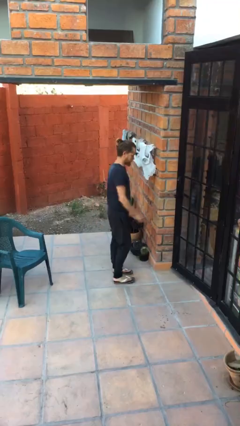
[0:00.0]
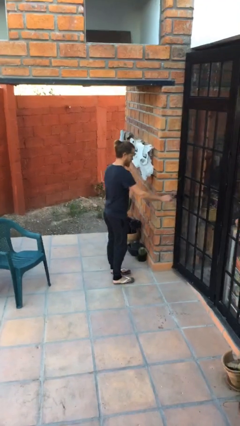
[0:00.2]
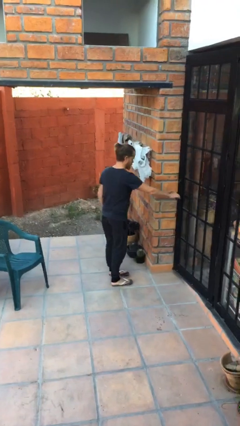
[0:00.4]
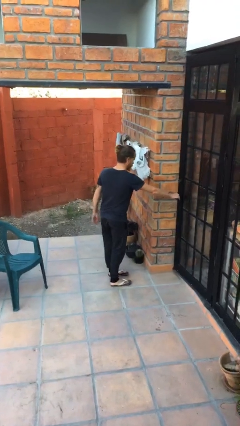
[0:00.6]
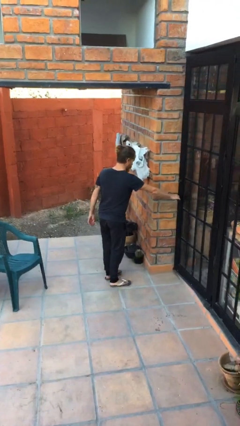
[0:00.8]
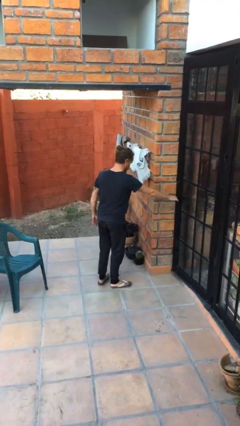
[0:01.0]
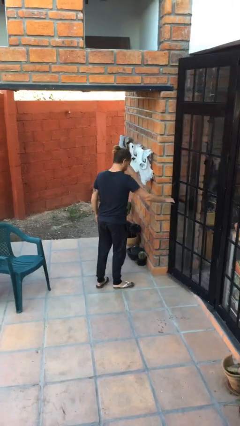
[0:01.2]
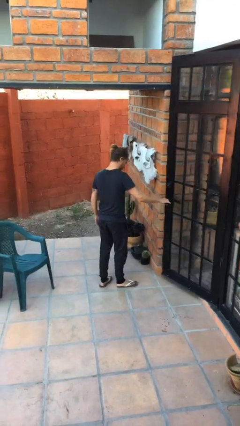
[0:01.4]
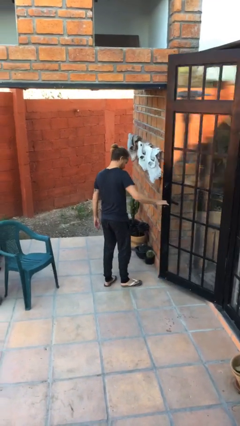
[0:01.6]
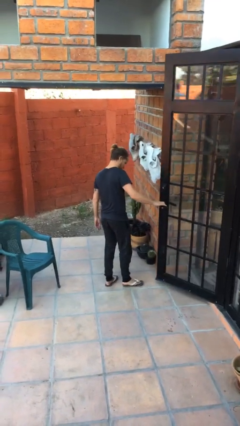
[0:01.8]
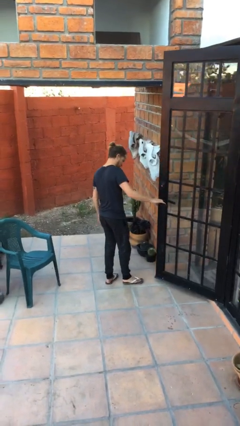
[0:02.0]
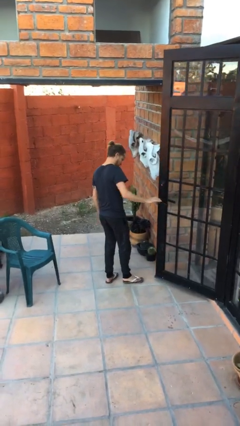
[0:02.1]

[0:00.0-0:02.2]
person opens facility door

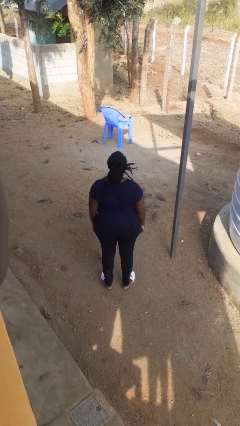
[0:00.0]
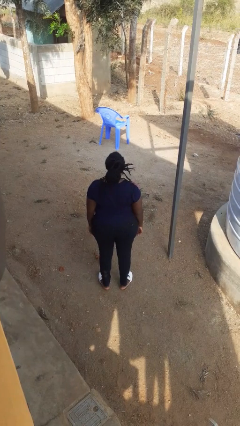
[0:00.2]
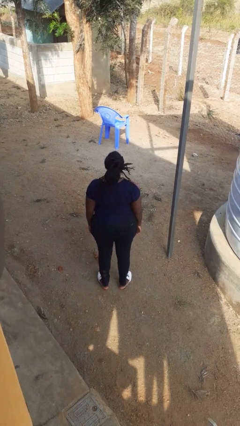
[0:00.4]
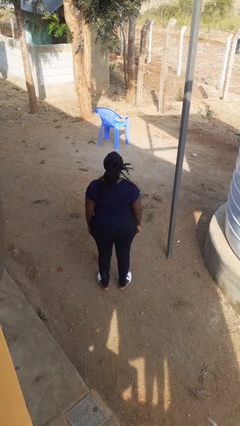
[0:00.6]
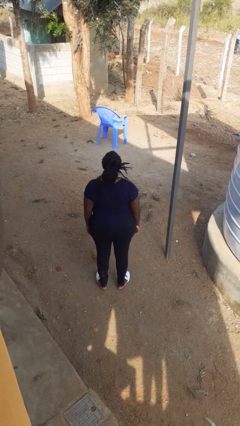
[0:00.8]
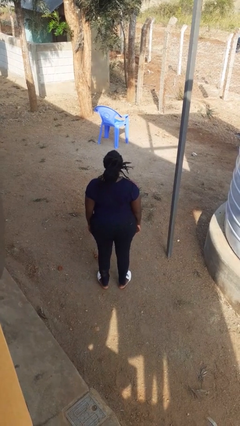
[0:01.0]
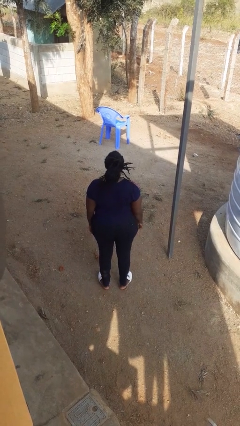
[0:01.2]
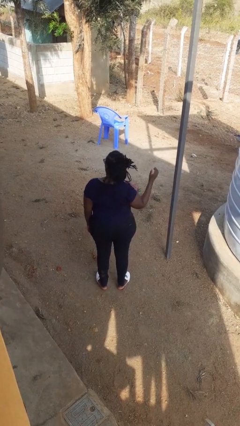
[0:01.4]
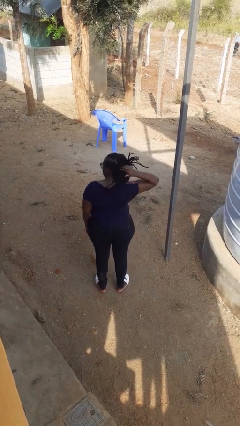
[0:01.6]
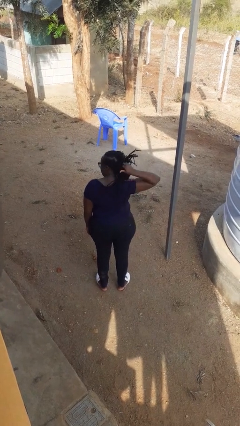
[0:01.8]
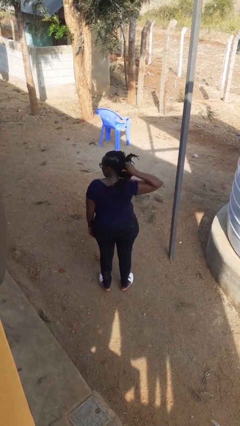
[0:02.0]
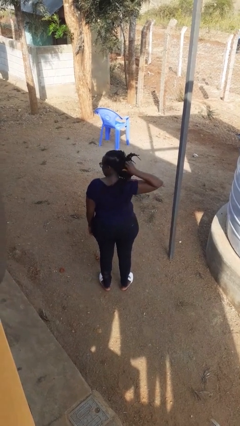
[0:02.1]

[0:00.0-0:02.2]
person takes off hairtie

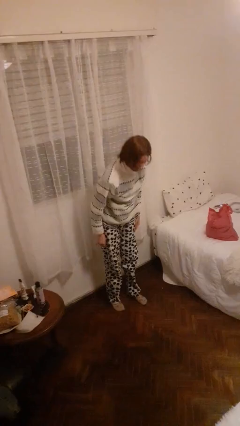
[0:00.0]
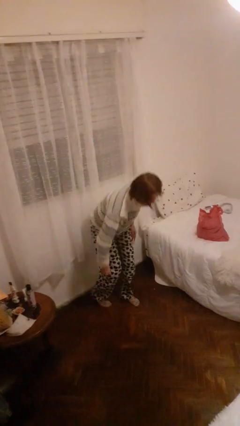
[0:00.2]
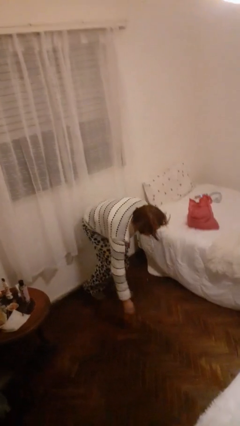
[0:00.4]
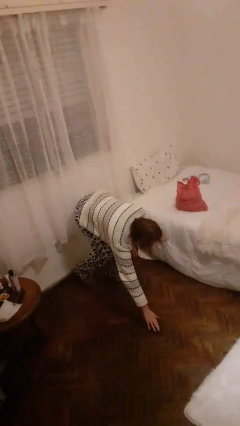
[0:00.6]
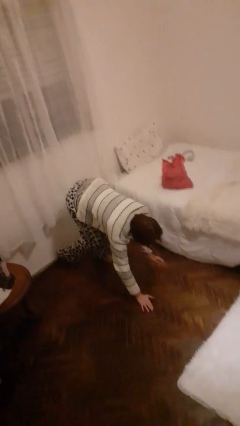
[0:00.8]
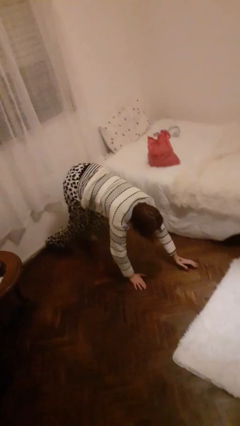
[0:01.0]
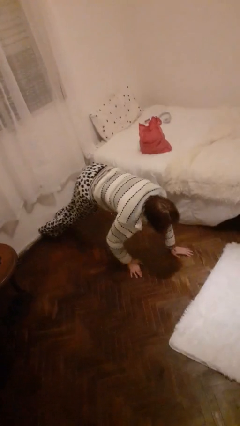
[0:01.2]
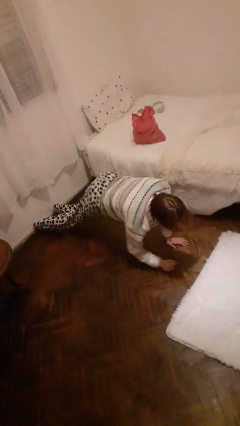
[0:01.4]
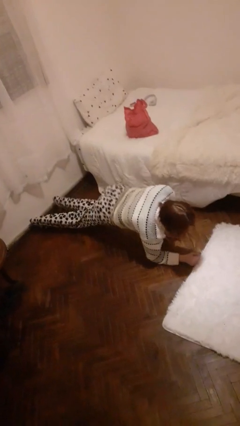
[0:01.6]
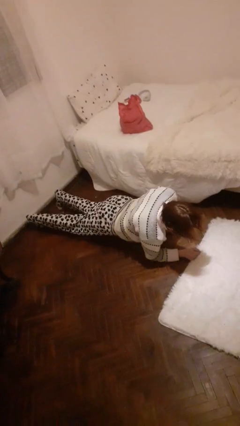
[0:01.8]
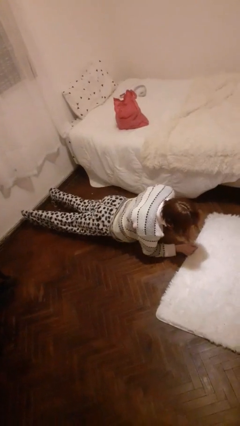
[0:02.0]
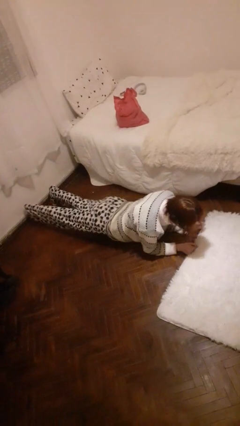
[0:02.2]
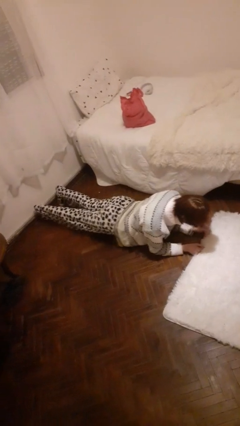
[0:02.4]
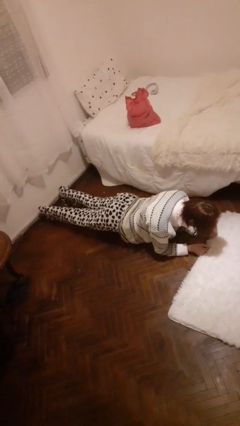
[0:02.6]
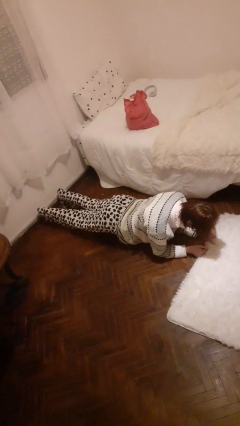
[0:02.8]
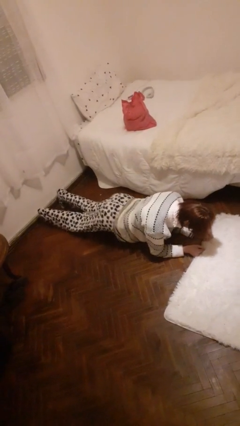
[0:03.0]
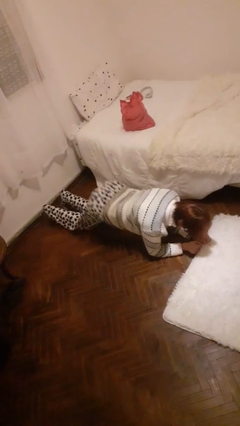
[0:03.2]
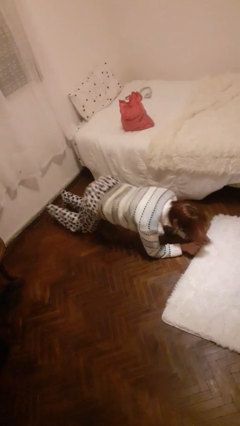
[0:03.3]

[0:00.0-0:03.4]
person exercises with plank

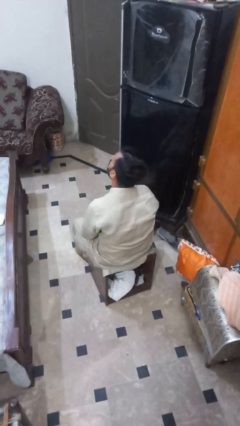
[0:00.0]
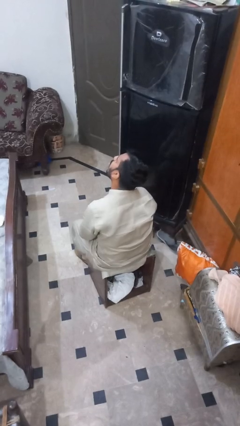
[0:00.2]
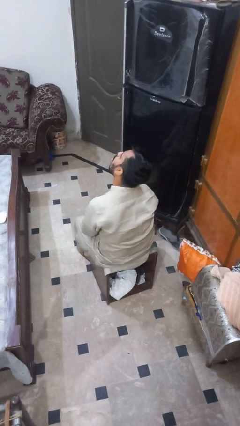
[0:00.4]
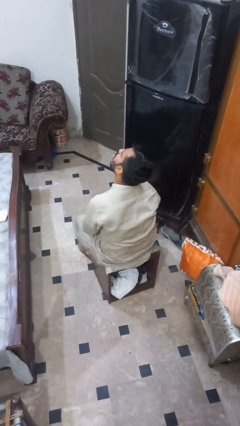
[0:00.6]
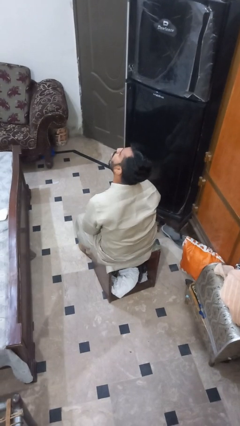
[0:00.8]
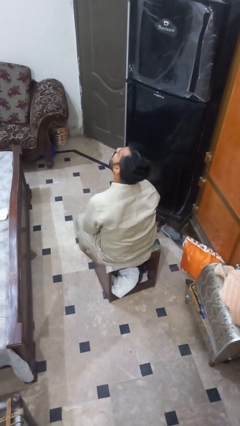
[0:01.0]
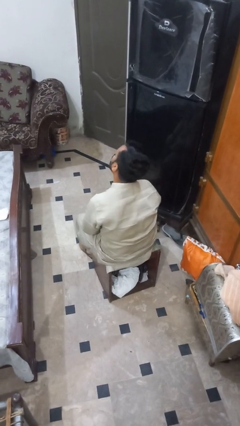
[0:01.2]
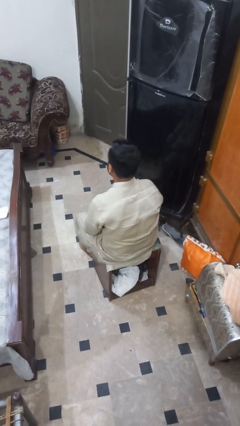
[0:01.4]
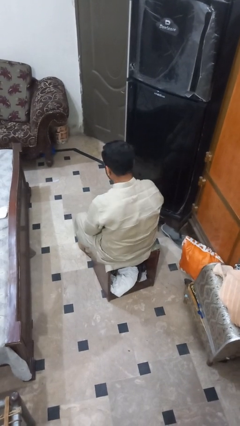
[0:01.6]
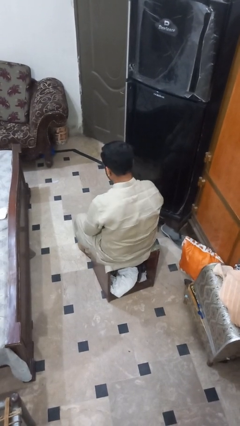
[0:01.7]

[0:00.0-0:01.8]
person sticks out tongue

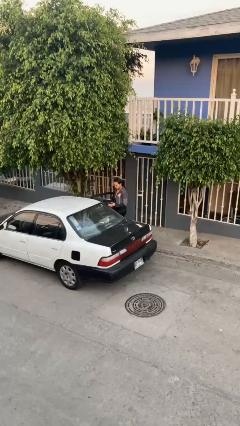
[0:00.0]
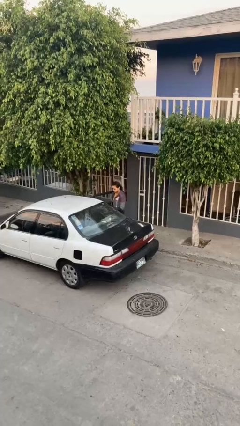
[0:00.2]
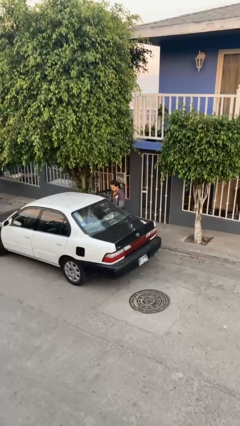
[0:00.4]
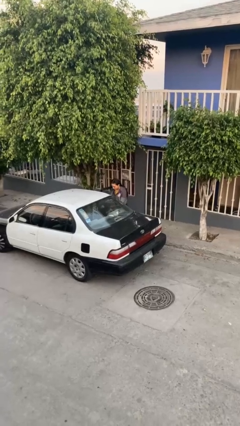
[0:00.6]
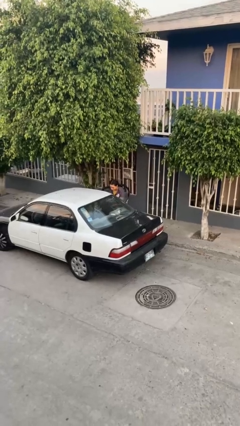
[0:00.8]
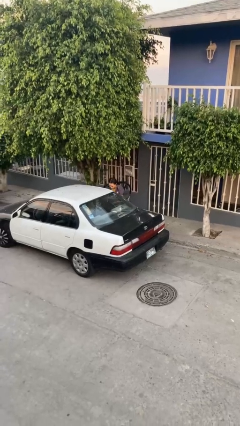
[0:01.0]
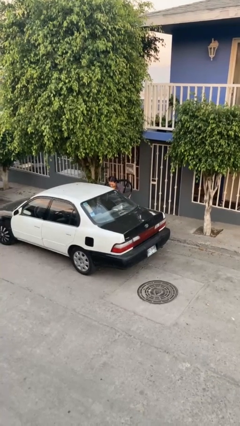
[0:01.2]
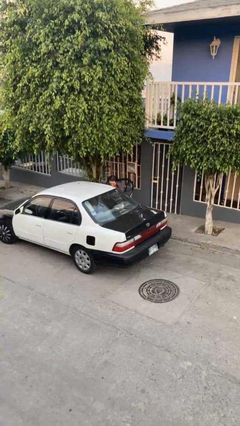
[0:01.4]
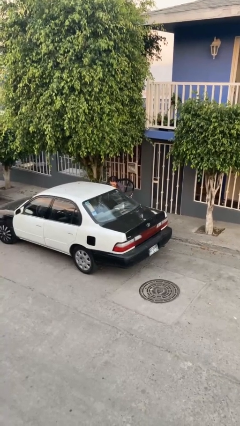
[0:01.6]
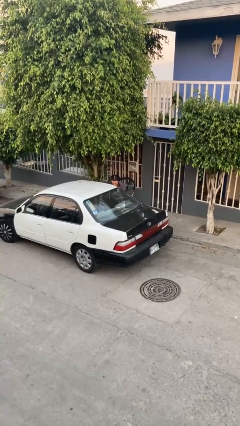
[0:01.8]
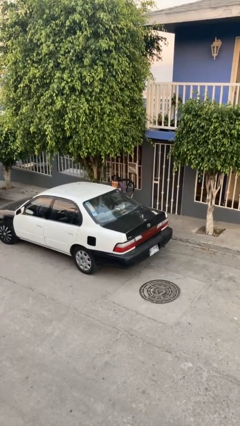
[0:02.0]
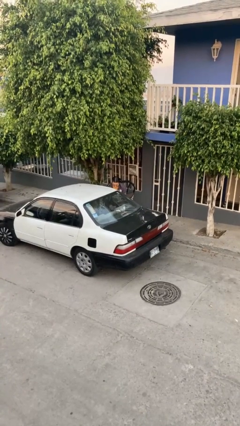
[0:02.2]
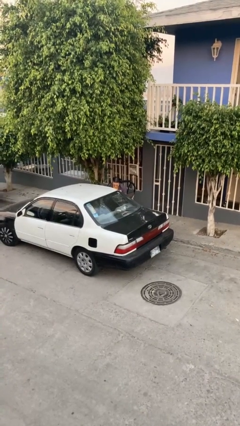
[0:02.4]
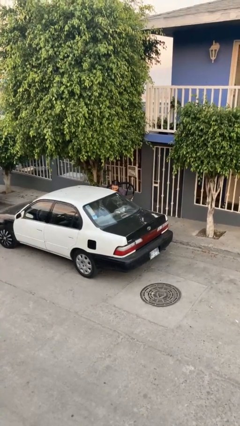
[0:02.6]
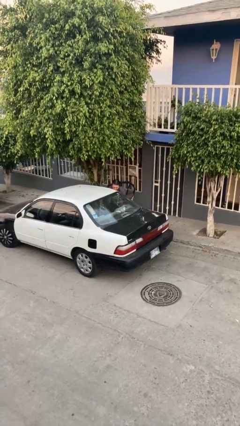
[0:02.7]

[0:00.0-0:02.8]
person loads car

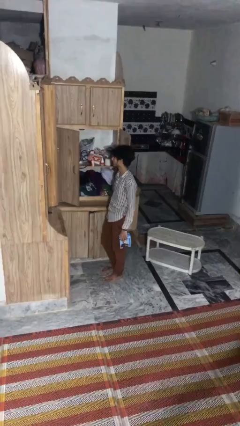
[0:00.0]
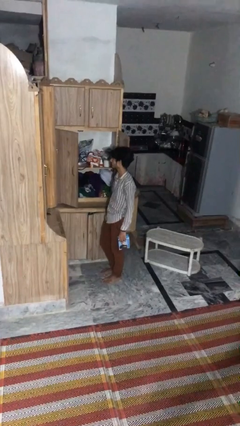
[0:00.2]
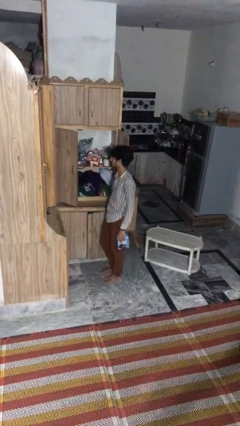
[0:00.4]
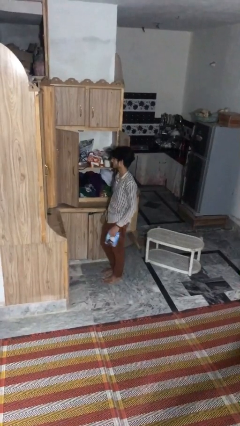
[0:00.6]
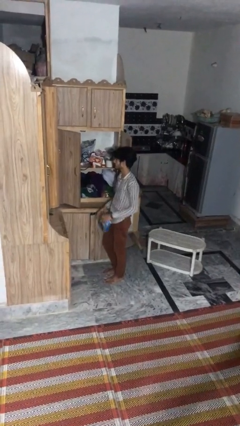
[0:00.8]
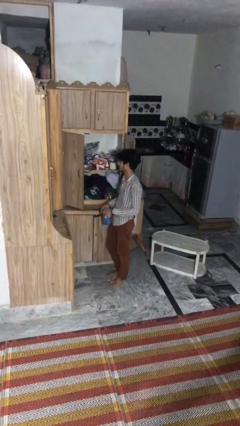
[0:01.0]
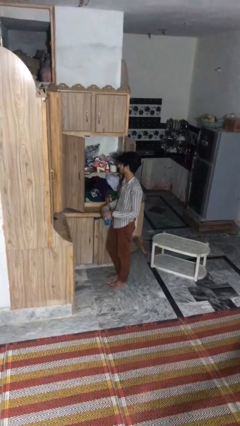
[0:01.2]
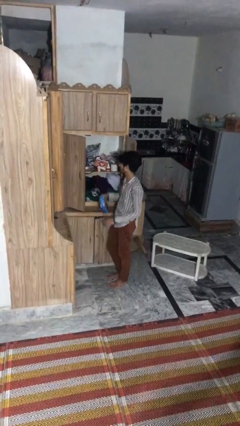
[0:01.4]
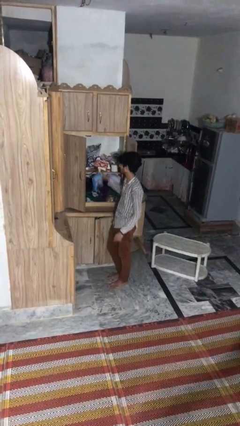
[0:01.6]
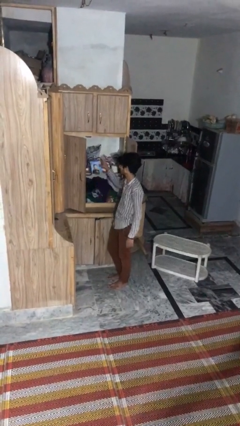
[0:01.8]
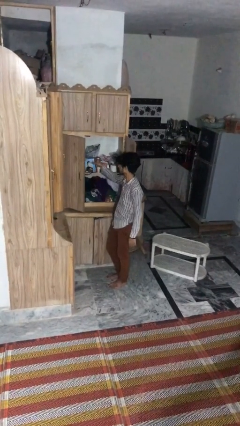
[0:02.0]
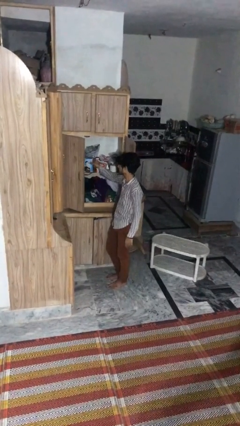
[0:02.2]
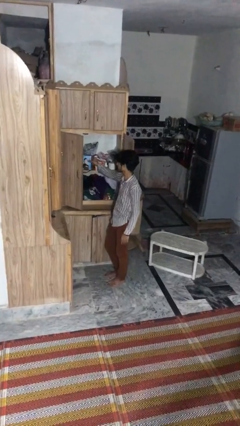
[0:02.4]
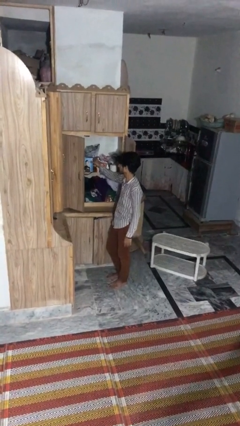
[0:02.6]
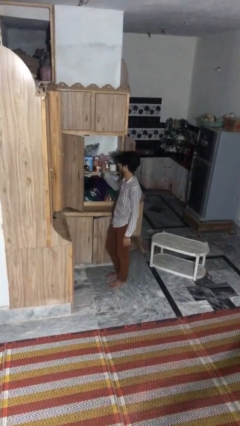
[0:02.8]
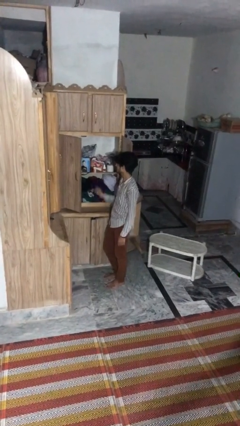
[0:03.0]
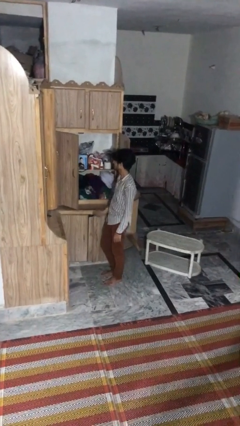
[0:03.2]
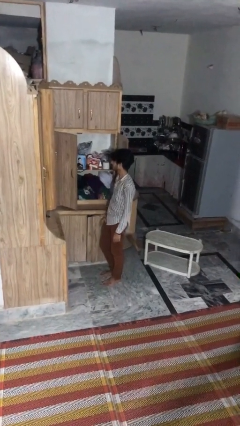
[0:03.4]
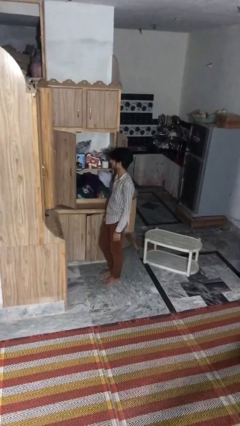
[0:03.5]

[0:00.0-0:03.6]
person puts down object into cabinet

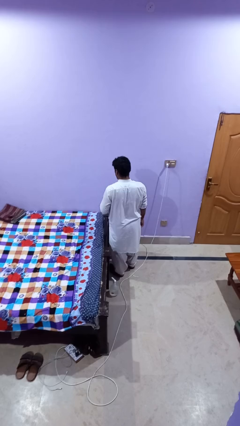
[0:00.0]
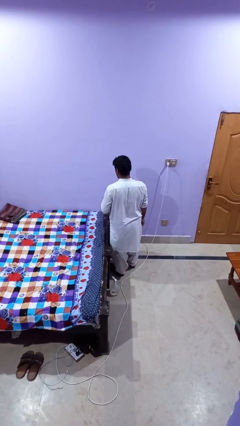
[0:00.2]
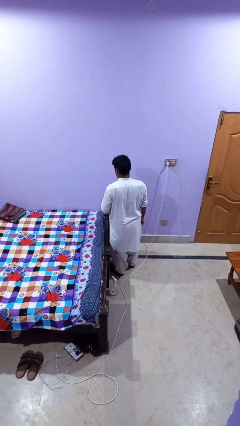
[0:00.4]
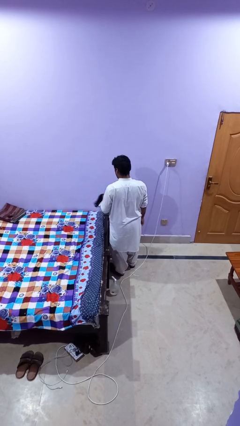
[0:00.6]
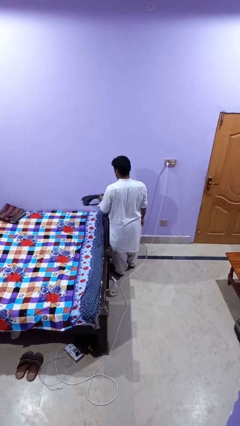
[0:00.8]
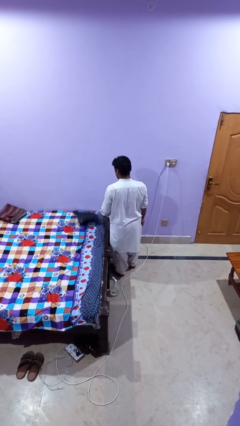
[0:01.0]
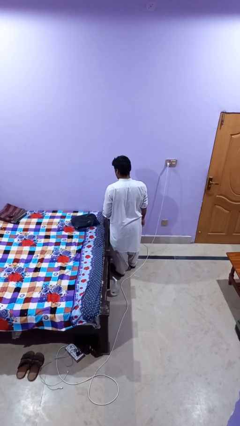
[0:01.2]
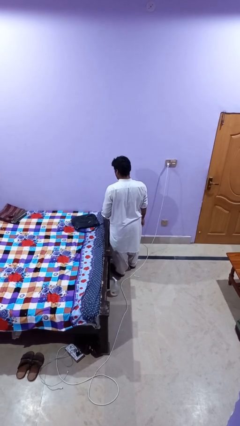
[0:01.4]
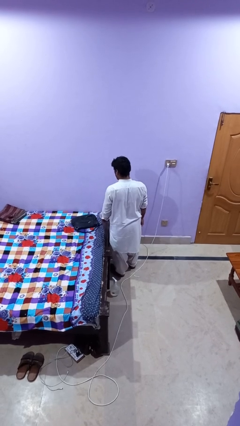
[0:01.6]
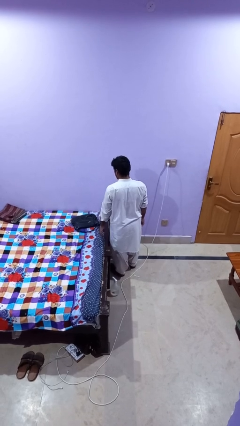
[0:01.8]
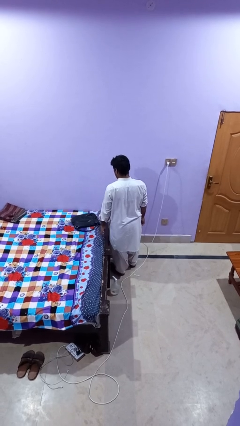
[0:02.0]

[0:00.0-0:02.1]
person throws object on bed
